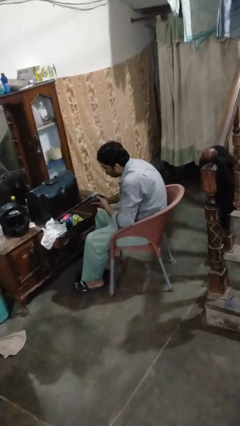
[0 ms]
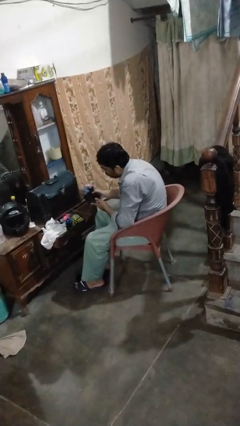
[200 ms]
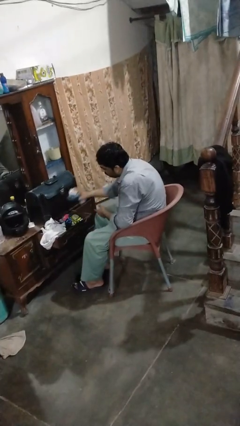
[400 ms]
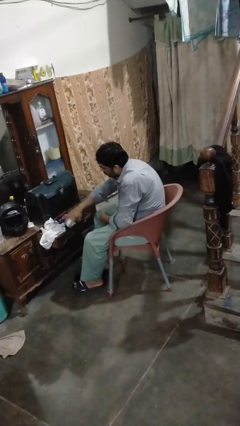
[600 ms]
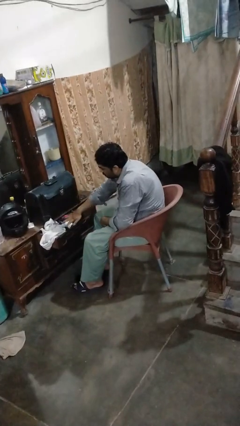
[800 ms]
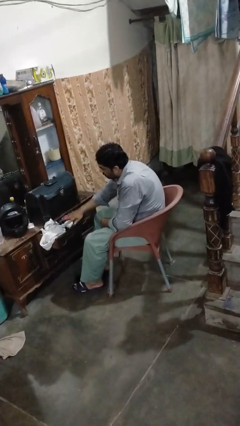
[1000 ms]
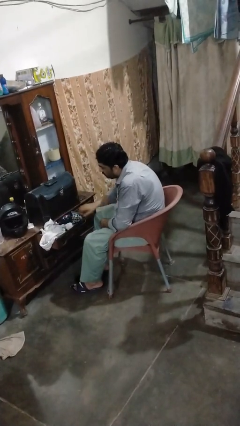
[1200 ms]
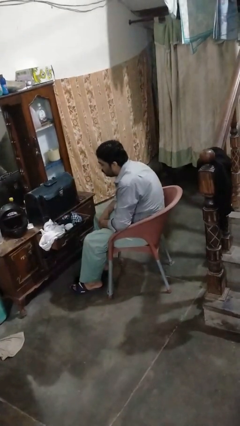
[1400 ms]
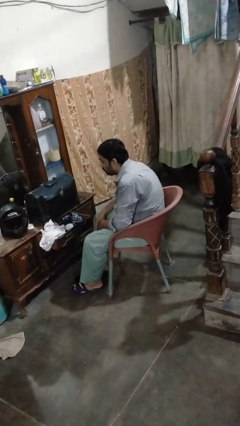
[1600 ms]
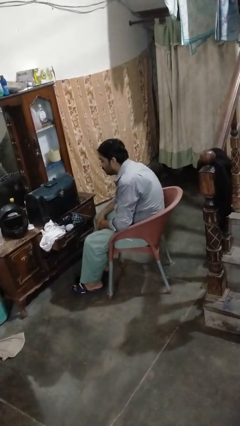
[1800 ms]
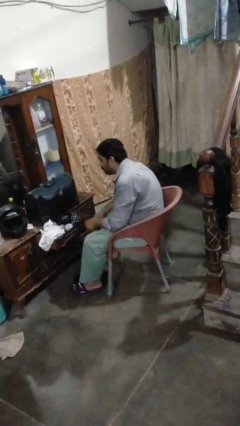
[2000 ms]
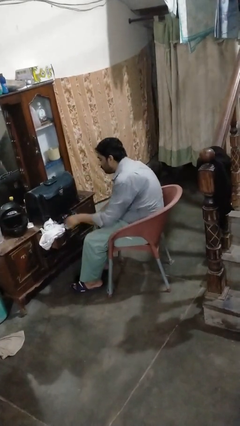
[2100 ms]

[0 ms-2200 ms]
person puts clothes into dresser

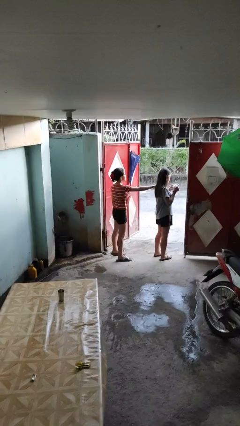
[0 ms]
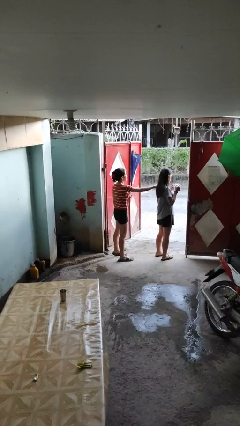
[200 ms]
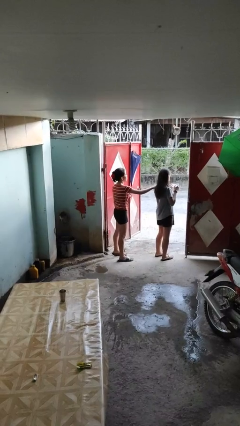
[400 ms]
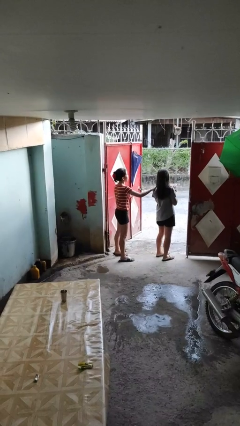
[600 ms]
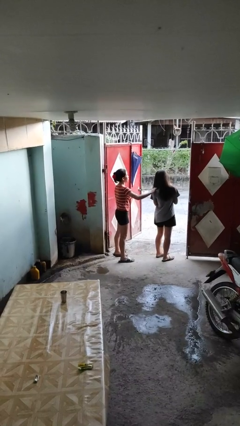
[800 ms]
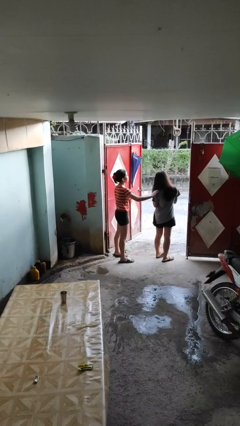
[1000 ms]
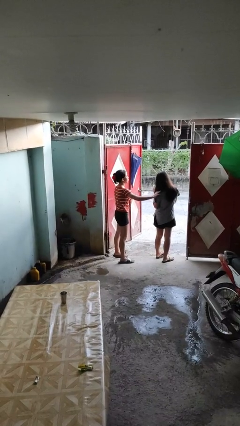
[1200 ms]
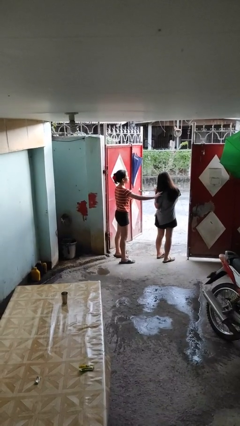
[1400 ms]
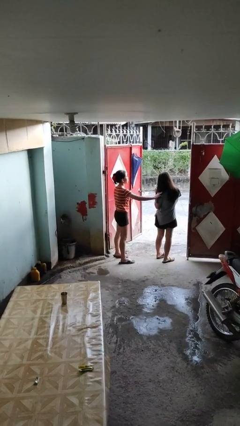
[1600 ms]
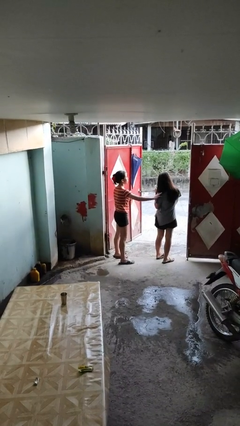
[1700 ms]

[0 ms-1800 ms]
person spins person around

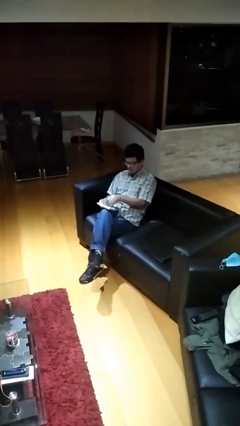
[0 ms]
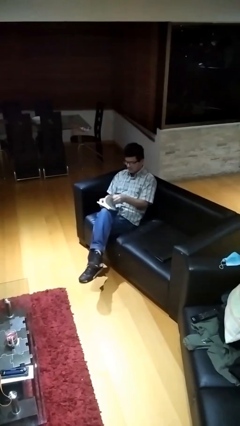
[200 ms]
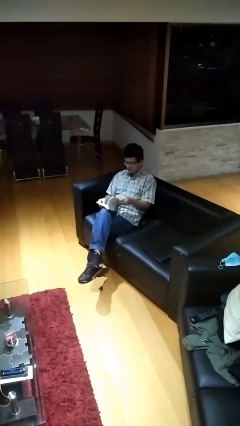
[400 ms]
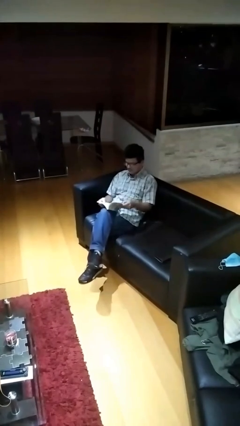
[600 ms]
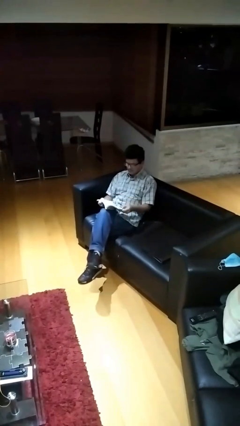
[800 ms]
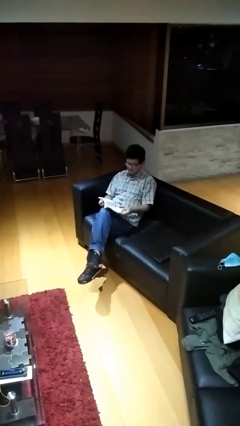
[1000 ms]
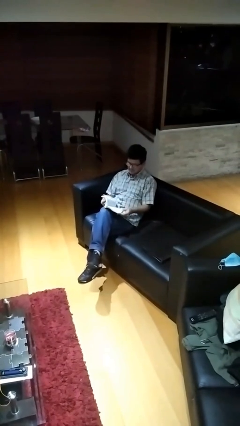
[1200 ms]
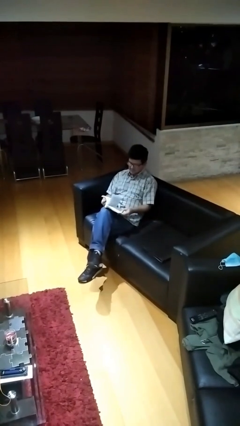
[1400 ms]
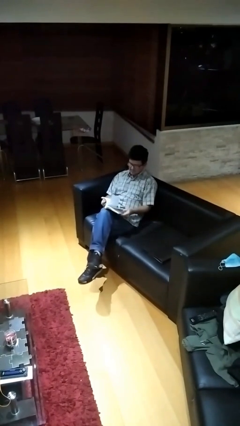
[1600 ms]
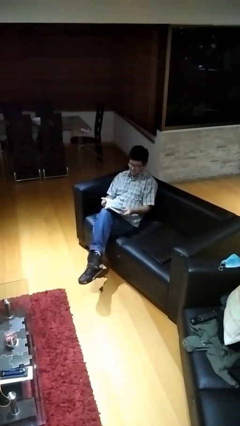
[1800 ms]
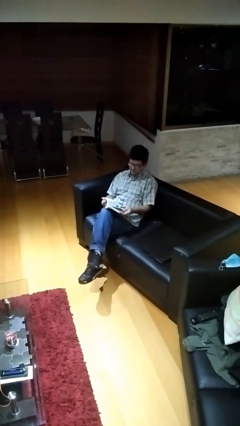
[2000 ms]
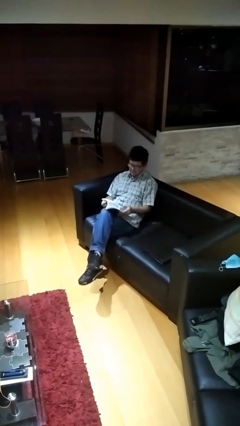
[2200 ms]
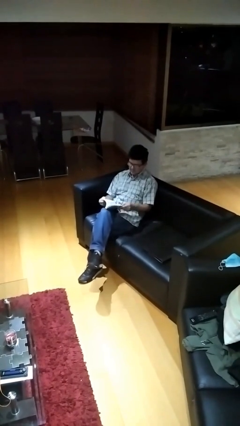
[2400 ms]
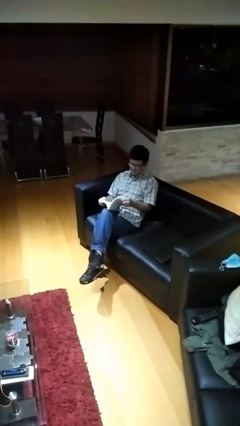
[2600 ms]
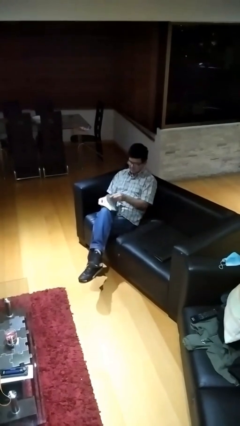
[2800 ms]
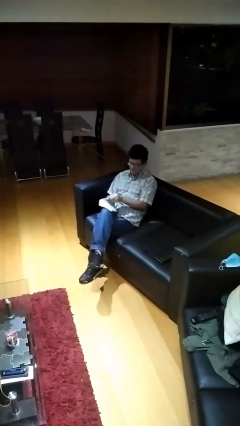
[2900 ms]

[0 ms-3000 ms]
person reads document

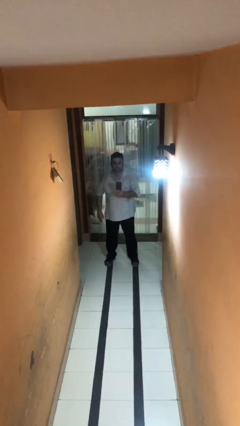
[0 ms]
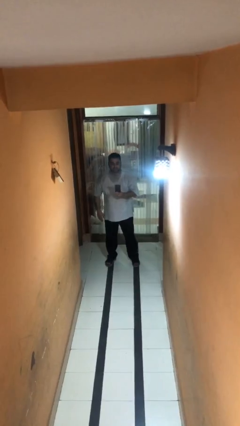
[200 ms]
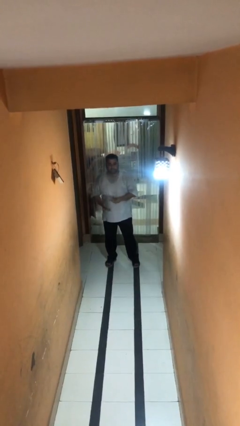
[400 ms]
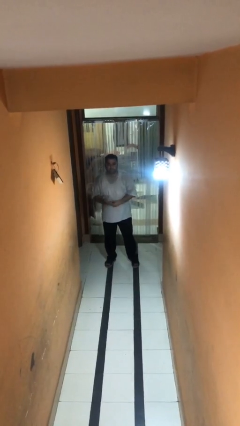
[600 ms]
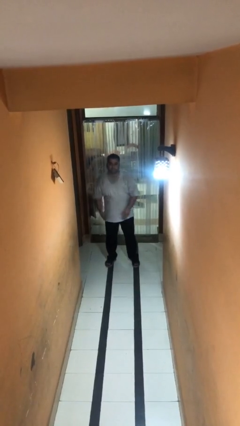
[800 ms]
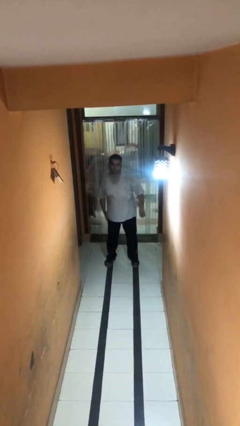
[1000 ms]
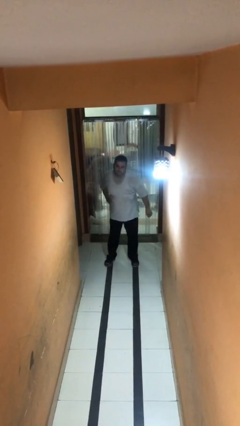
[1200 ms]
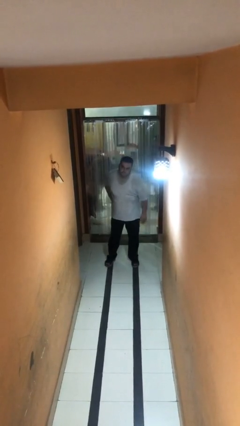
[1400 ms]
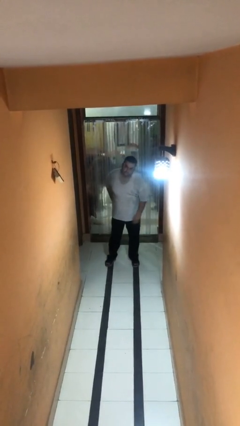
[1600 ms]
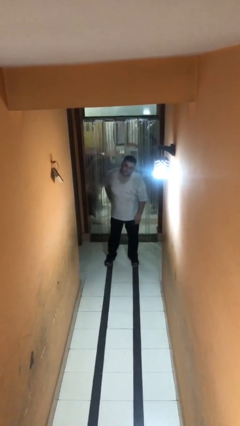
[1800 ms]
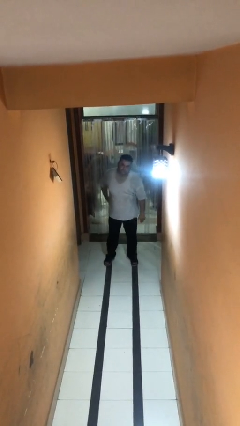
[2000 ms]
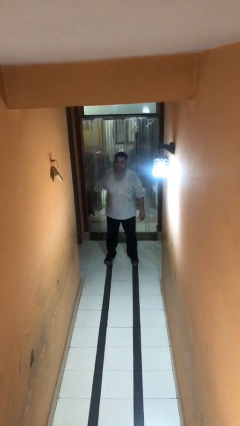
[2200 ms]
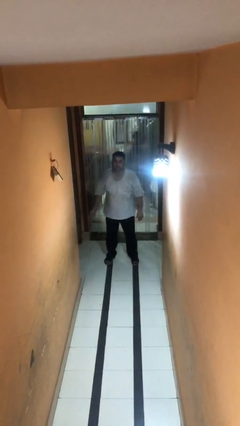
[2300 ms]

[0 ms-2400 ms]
person puts phone into pocket

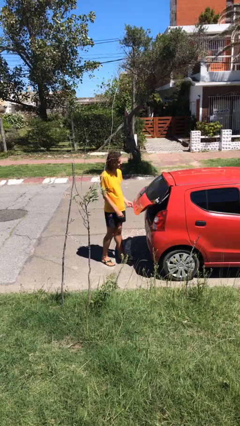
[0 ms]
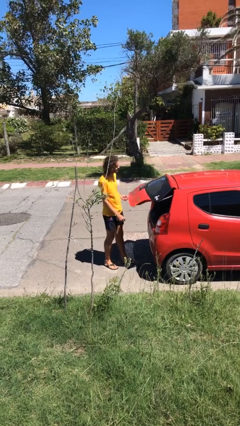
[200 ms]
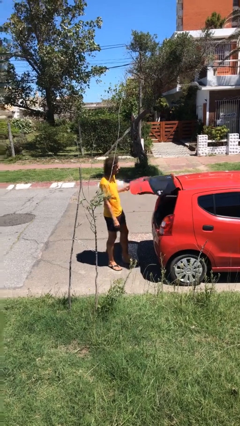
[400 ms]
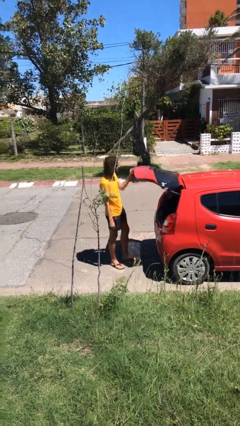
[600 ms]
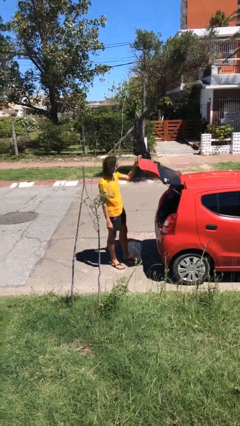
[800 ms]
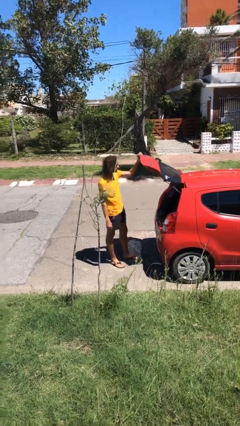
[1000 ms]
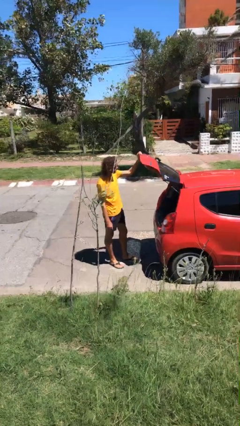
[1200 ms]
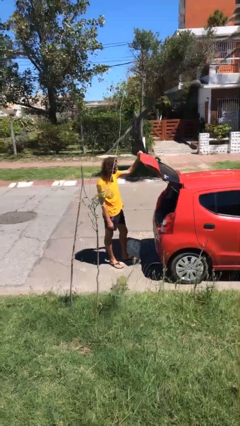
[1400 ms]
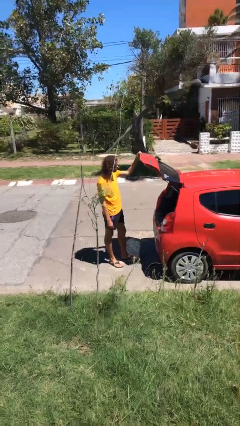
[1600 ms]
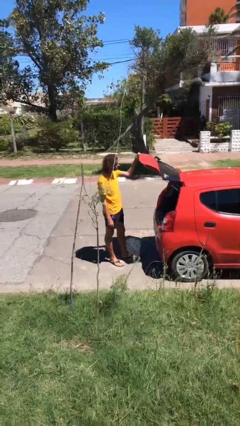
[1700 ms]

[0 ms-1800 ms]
person opens car trunk

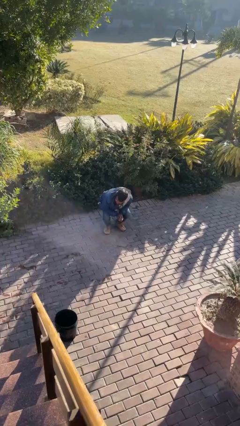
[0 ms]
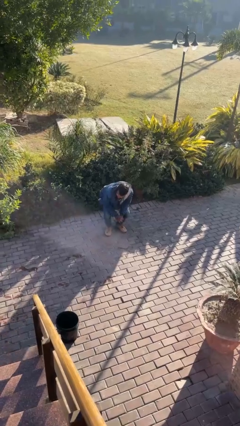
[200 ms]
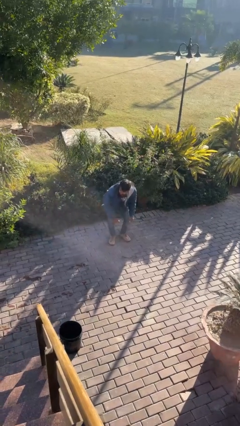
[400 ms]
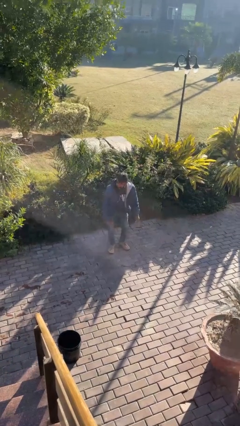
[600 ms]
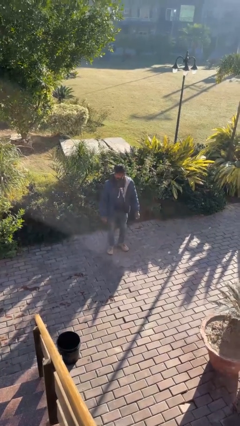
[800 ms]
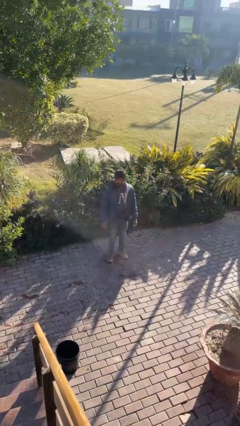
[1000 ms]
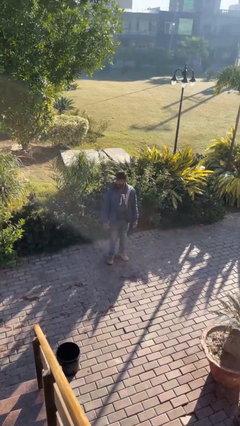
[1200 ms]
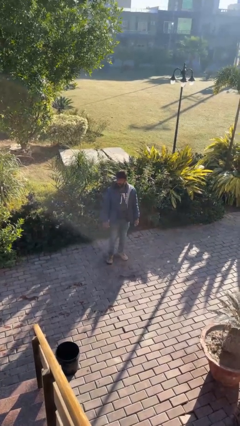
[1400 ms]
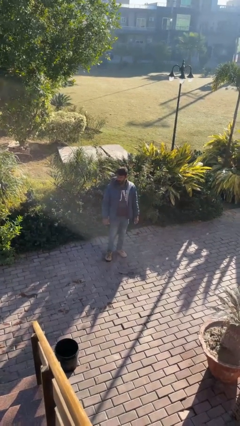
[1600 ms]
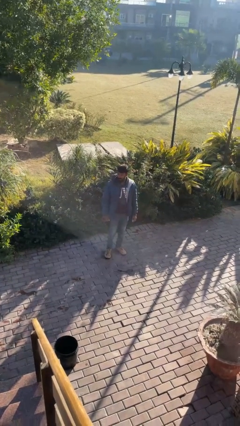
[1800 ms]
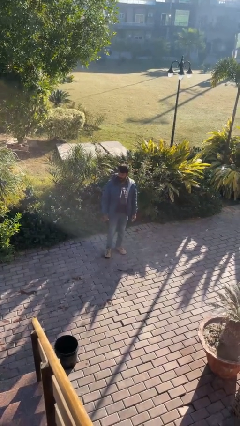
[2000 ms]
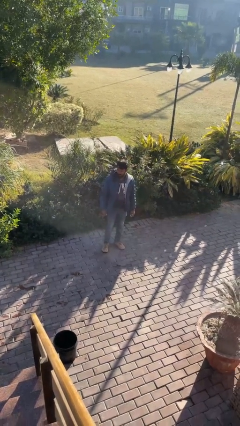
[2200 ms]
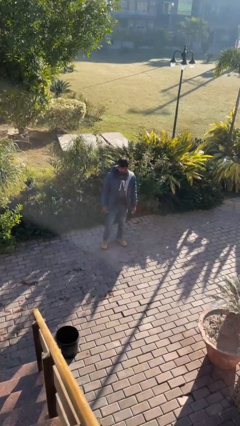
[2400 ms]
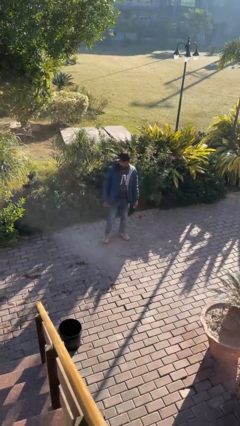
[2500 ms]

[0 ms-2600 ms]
person stands up

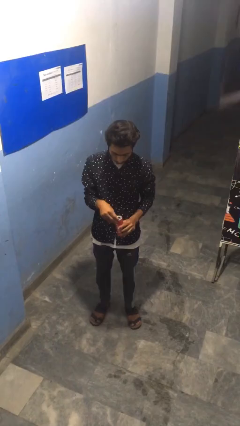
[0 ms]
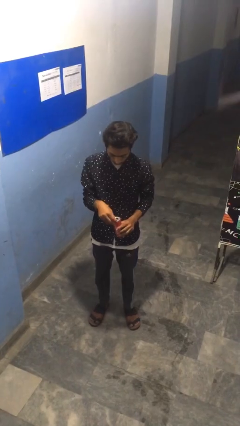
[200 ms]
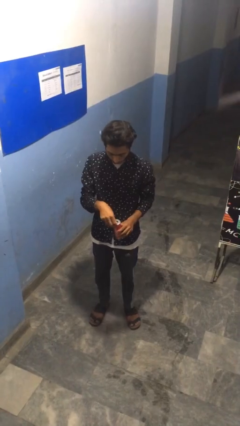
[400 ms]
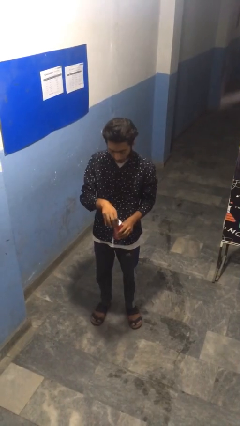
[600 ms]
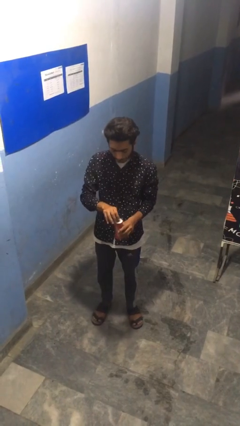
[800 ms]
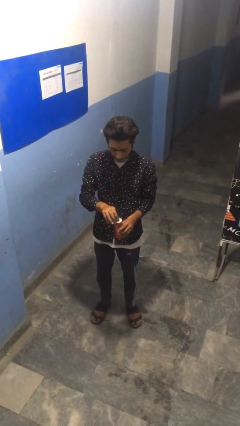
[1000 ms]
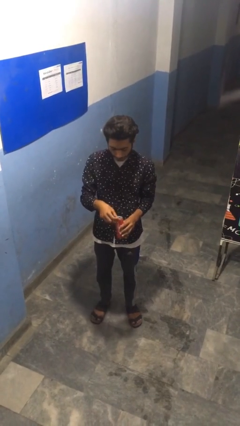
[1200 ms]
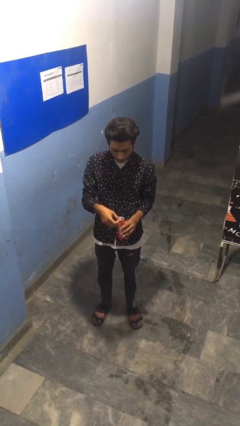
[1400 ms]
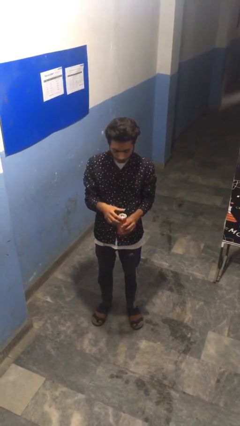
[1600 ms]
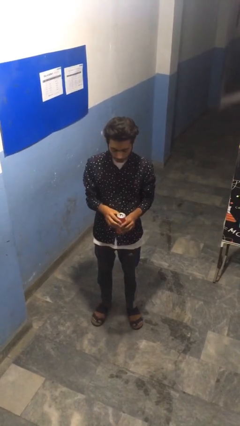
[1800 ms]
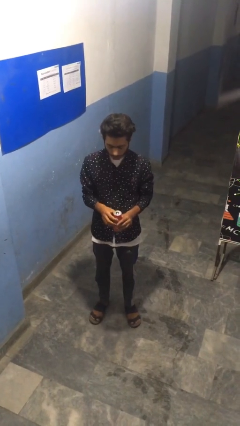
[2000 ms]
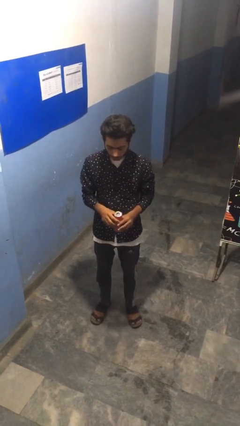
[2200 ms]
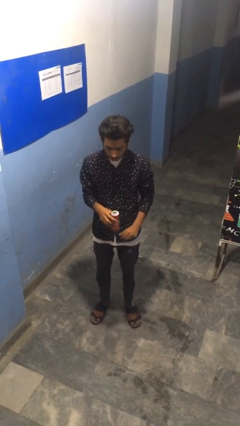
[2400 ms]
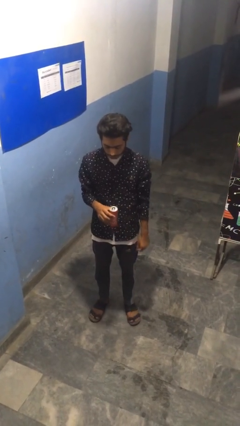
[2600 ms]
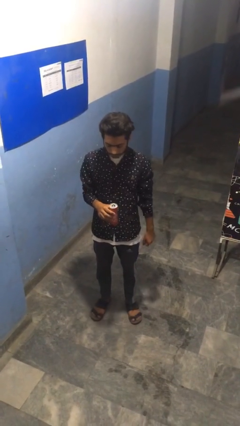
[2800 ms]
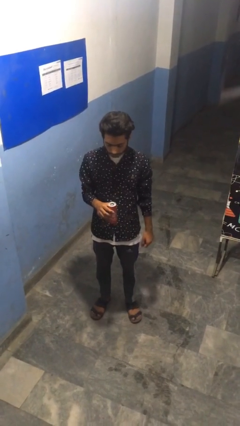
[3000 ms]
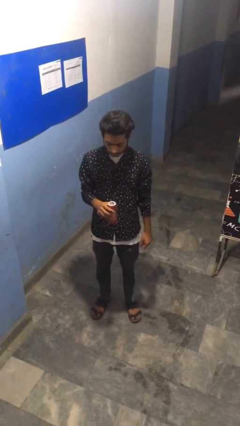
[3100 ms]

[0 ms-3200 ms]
person opens beverage can
